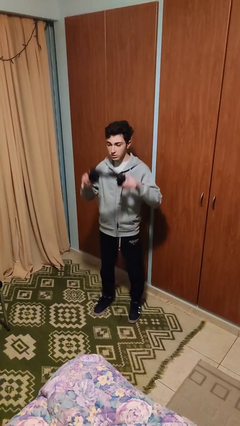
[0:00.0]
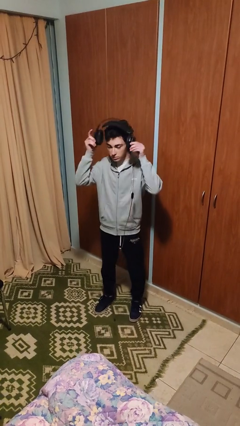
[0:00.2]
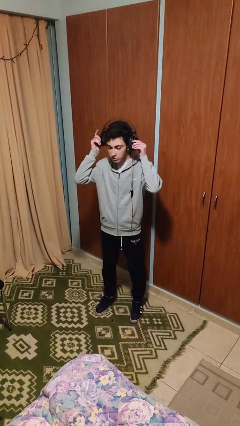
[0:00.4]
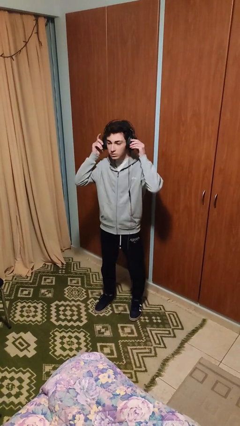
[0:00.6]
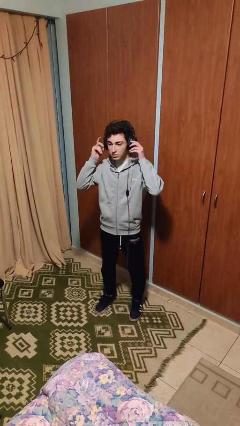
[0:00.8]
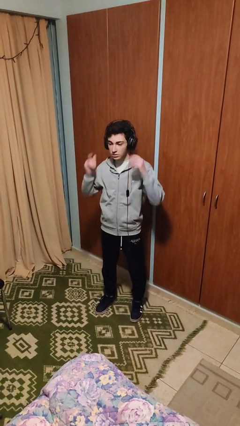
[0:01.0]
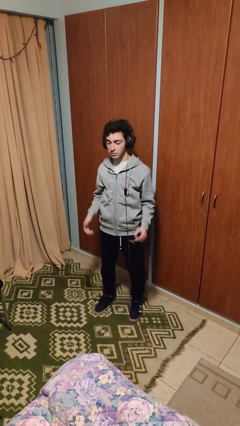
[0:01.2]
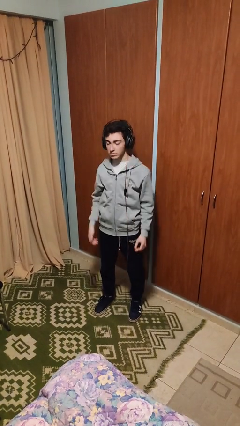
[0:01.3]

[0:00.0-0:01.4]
person puts on headphones

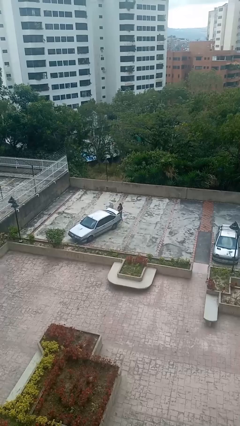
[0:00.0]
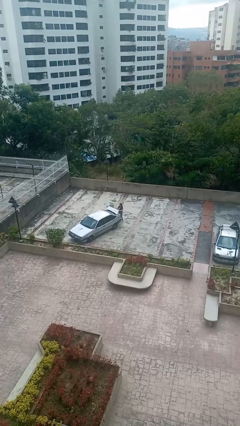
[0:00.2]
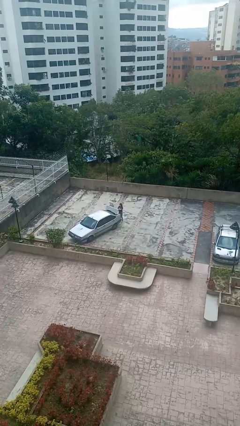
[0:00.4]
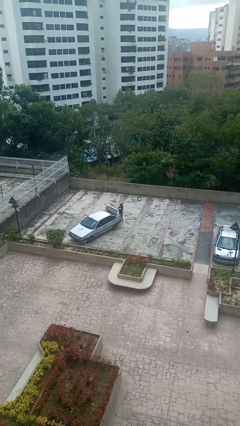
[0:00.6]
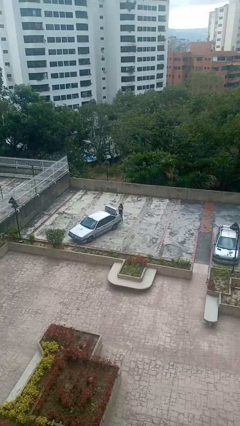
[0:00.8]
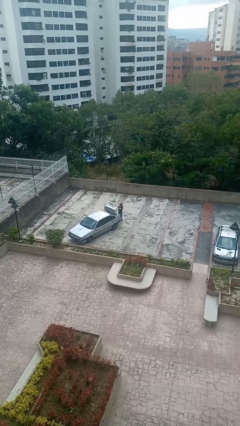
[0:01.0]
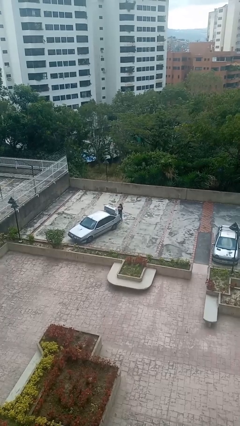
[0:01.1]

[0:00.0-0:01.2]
person opens car trunk

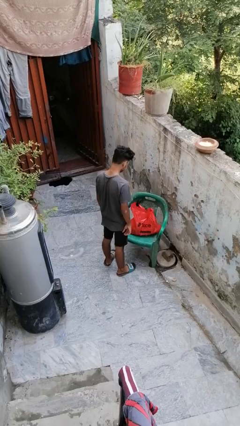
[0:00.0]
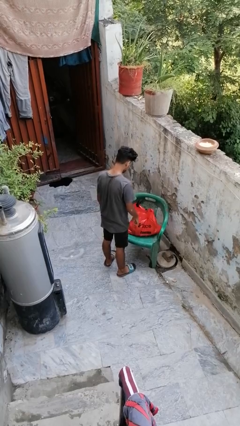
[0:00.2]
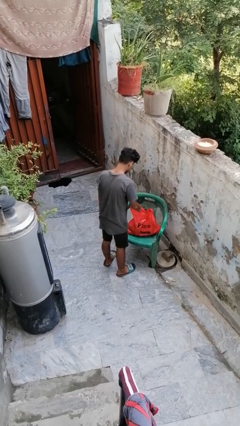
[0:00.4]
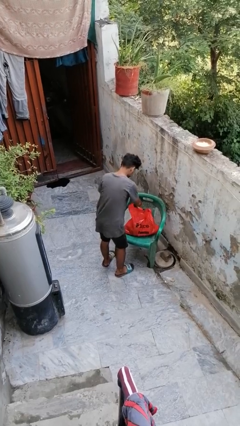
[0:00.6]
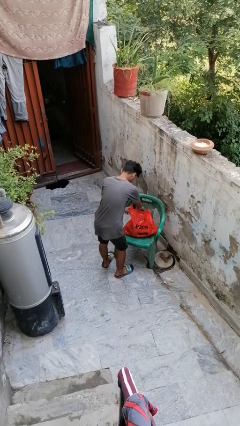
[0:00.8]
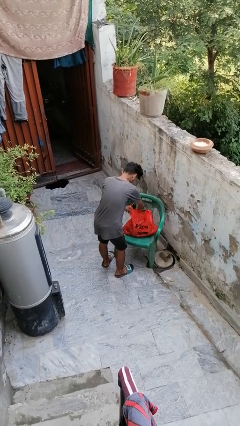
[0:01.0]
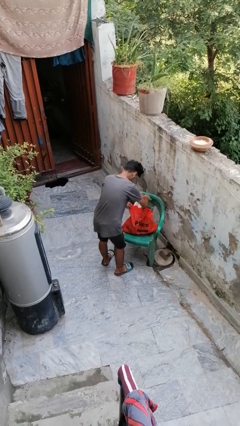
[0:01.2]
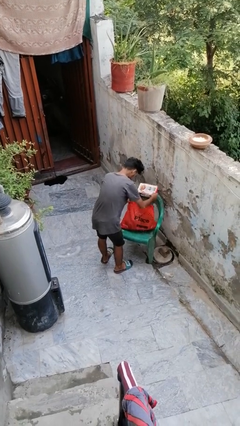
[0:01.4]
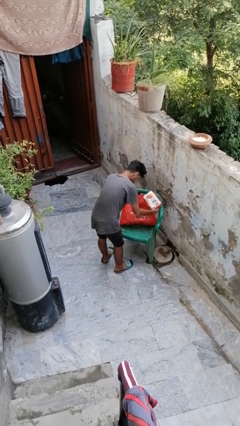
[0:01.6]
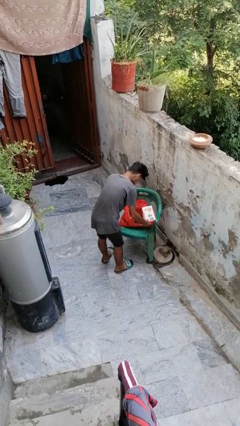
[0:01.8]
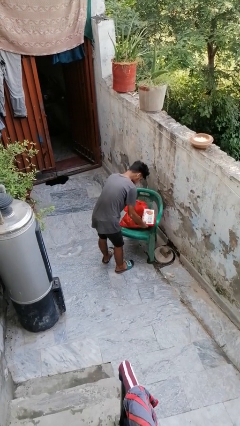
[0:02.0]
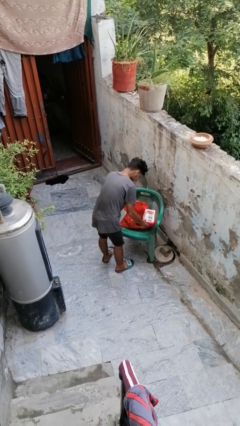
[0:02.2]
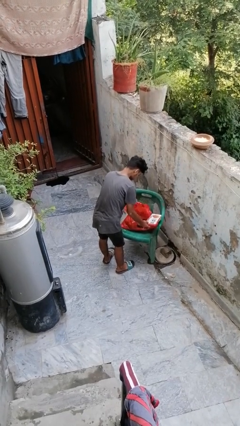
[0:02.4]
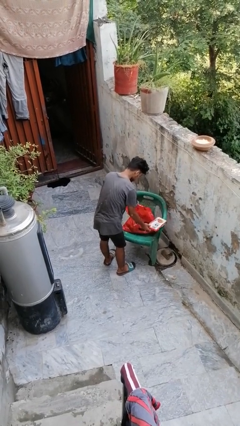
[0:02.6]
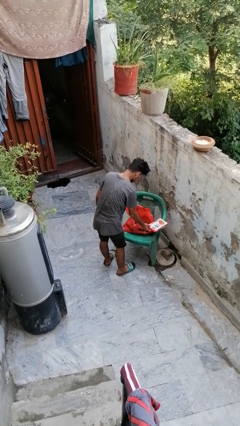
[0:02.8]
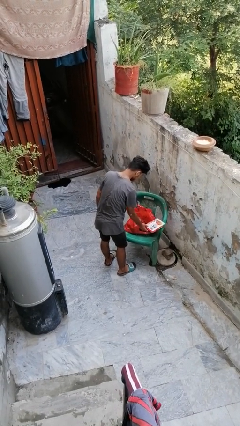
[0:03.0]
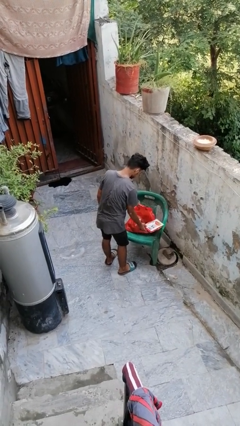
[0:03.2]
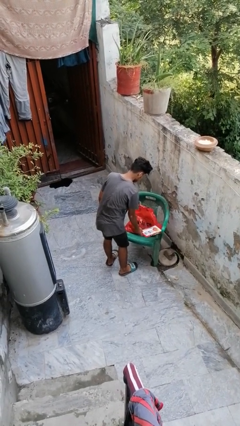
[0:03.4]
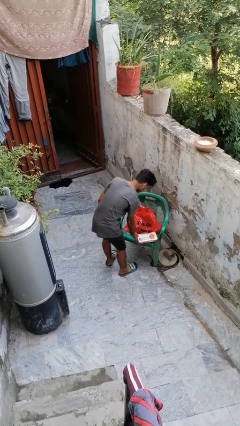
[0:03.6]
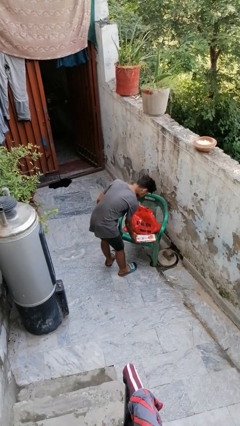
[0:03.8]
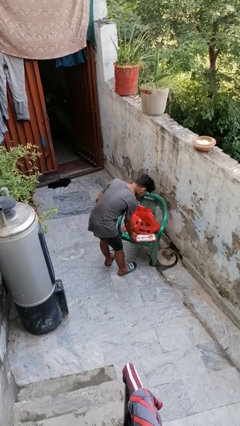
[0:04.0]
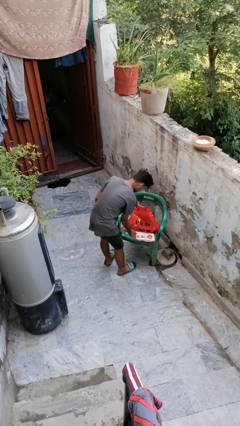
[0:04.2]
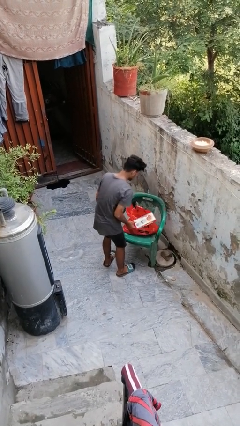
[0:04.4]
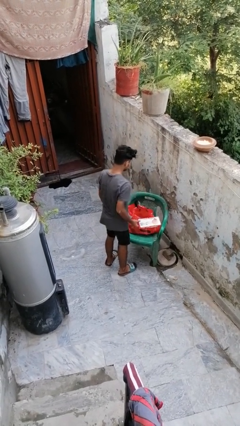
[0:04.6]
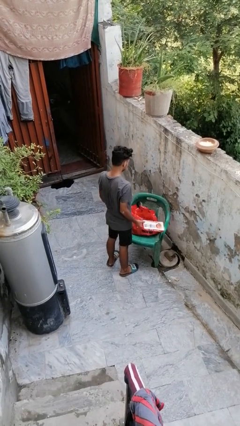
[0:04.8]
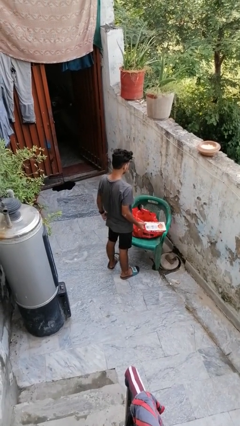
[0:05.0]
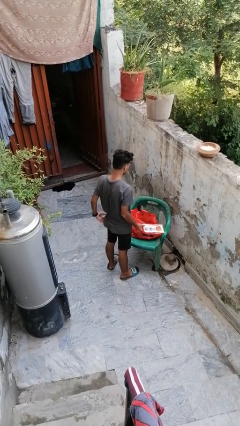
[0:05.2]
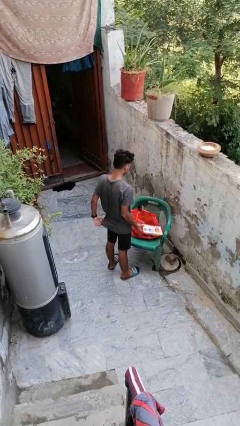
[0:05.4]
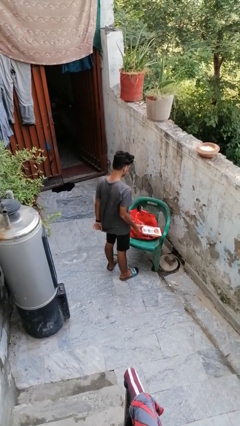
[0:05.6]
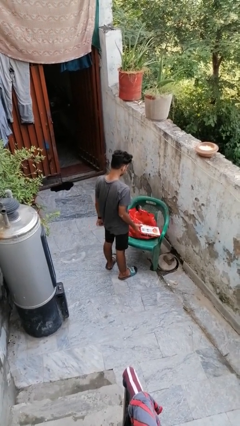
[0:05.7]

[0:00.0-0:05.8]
person takes object from bag

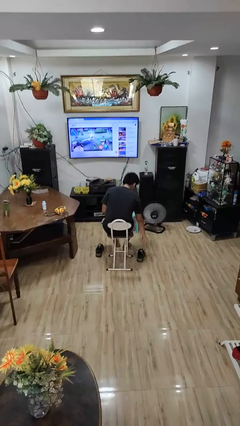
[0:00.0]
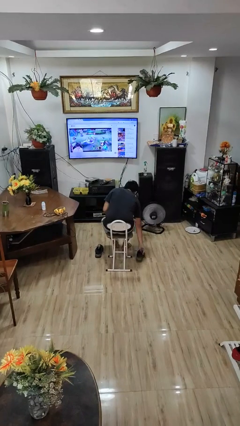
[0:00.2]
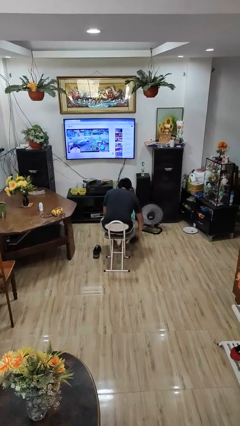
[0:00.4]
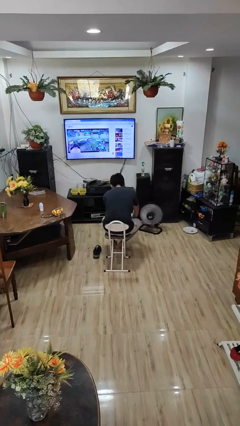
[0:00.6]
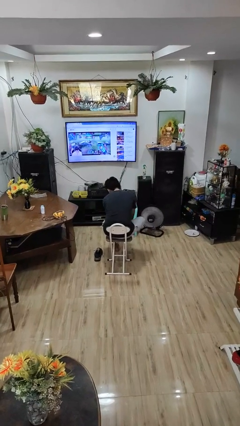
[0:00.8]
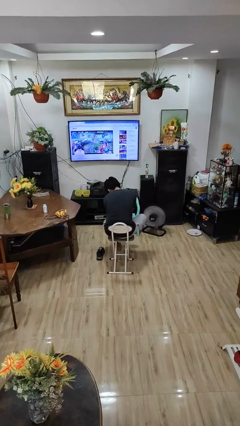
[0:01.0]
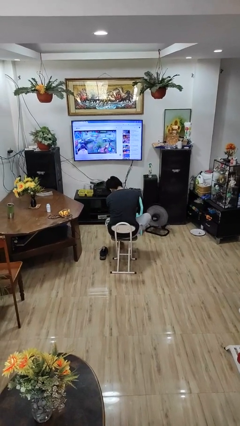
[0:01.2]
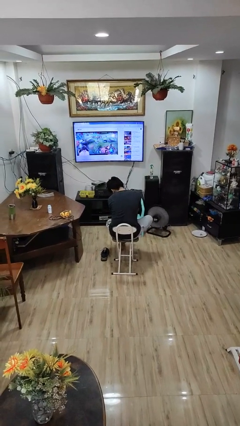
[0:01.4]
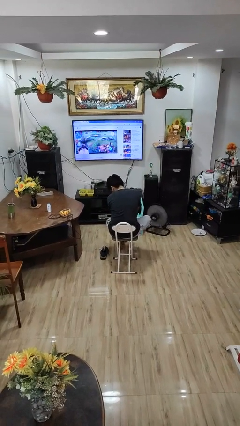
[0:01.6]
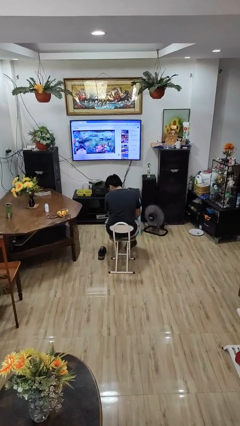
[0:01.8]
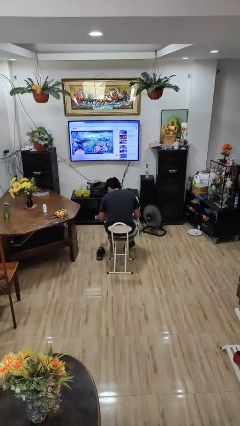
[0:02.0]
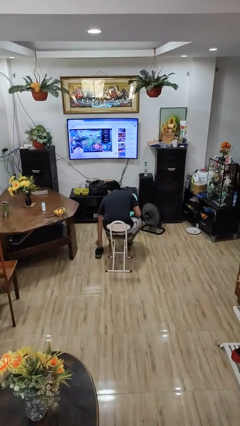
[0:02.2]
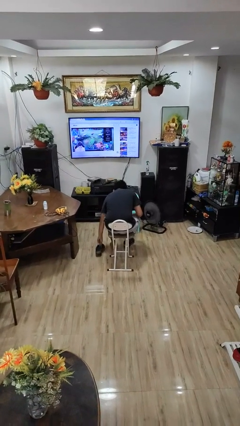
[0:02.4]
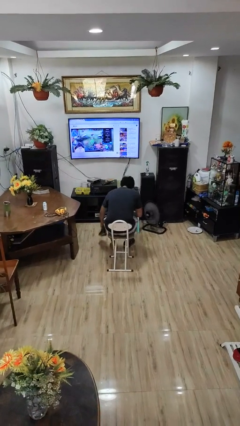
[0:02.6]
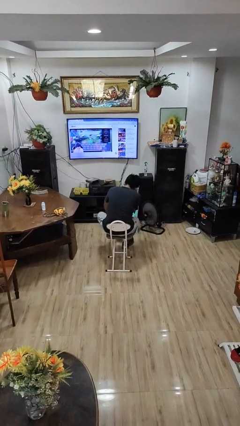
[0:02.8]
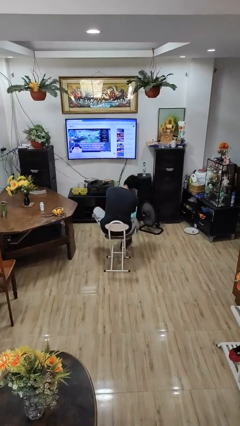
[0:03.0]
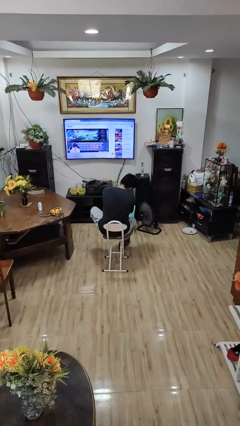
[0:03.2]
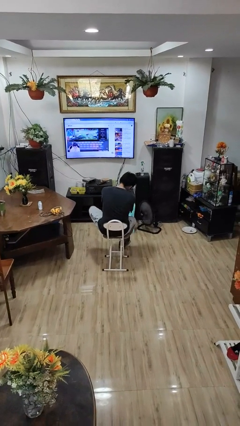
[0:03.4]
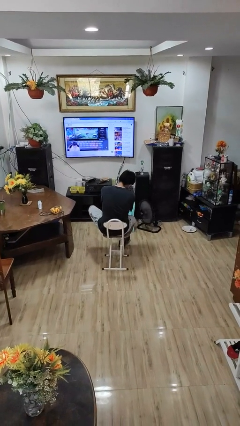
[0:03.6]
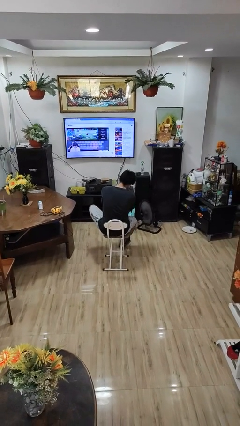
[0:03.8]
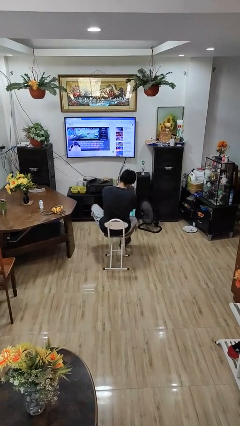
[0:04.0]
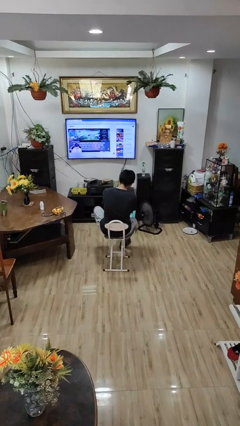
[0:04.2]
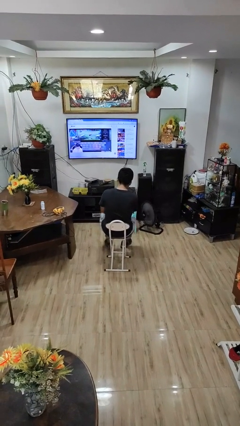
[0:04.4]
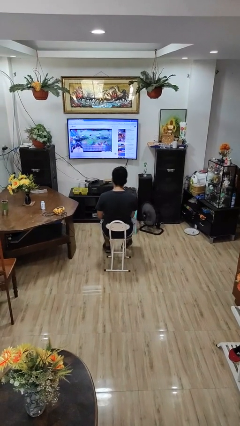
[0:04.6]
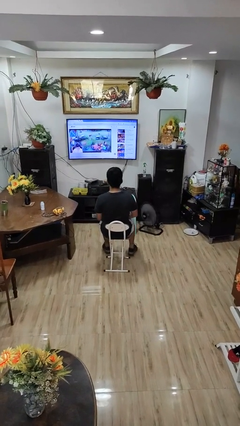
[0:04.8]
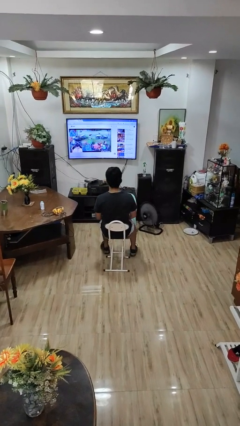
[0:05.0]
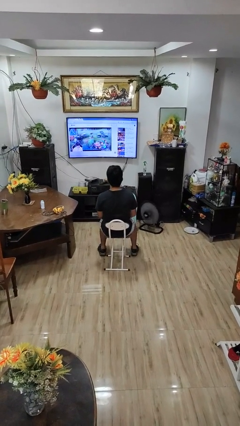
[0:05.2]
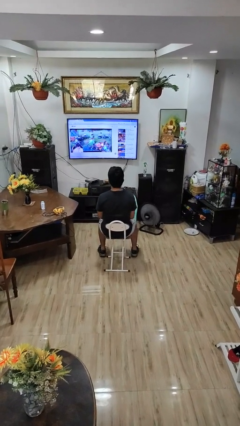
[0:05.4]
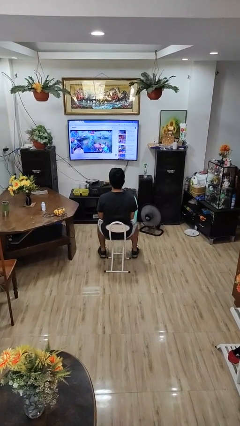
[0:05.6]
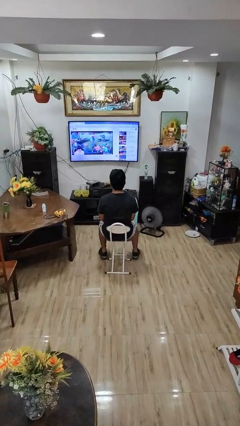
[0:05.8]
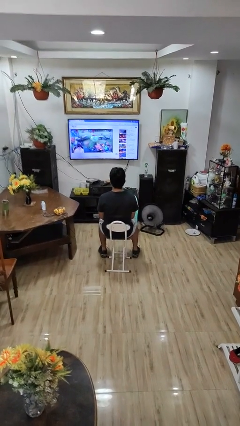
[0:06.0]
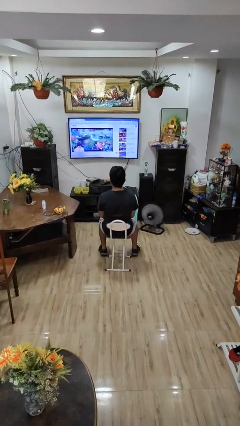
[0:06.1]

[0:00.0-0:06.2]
person puts on shoes

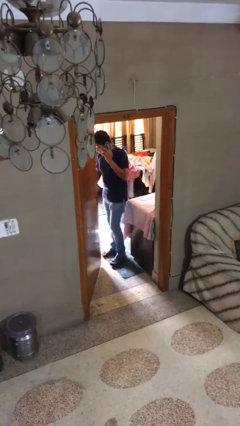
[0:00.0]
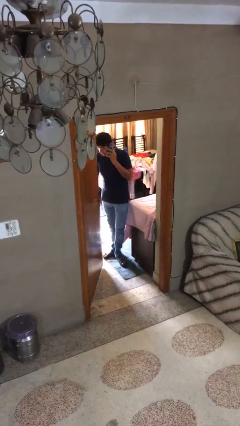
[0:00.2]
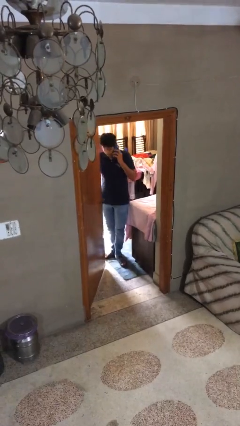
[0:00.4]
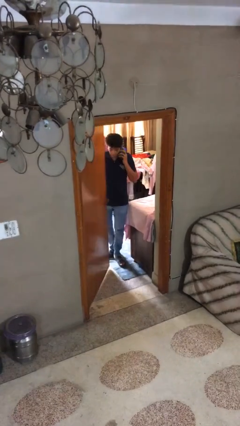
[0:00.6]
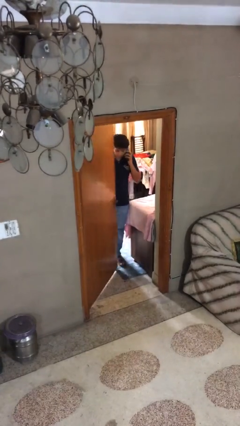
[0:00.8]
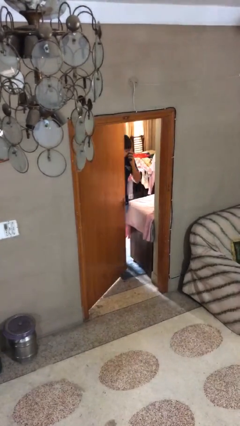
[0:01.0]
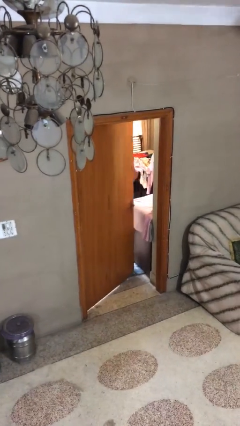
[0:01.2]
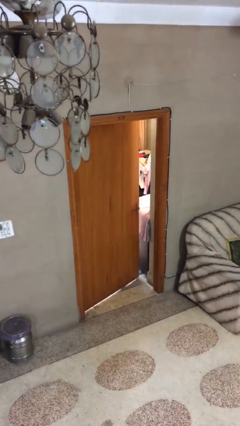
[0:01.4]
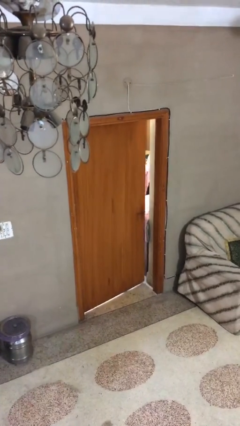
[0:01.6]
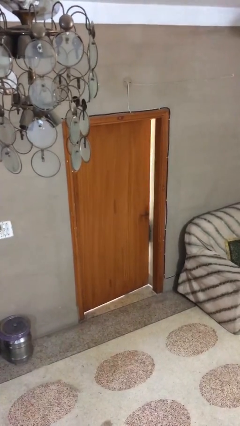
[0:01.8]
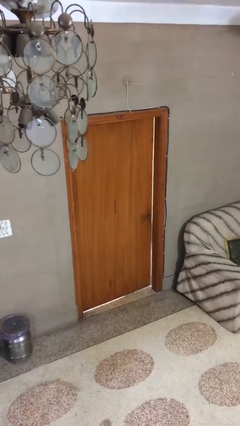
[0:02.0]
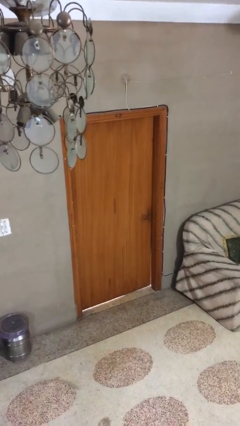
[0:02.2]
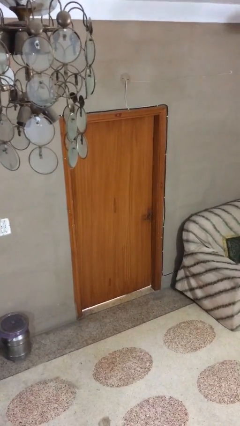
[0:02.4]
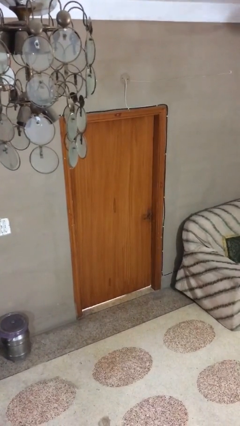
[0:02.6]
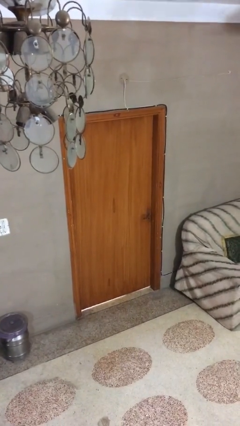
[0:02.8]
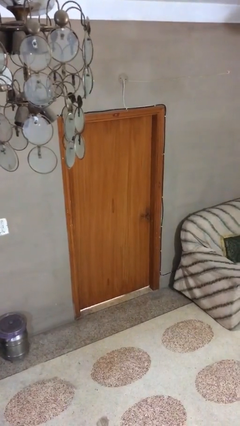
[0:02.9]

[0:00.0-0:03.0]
person closes facility door

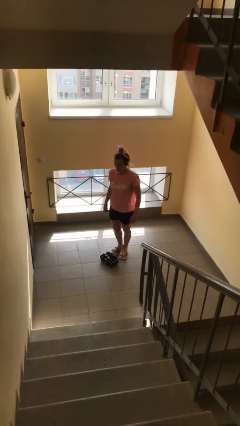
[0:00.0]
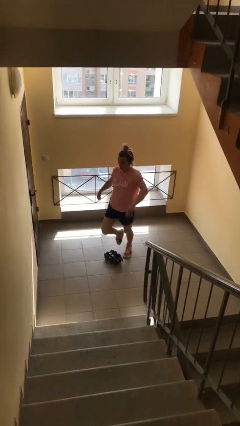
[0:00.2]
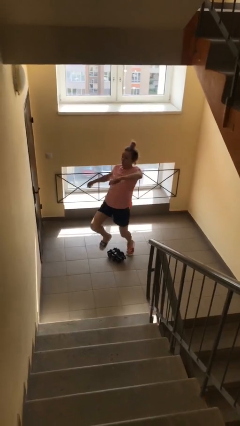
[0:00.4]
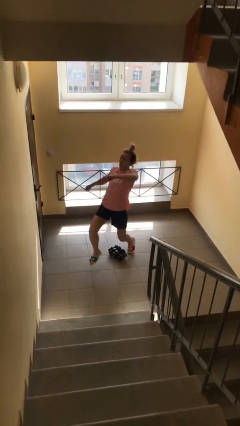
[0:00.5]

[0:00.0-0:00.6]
person trips on object on floor
